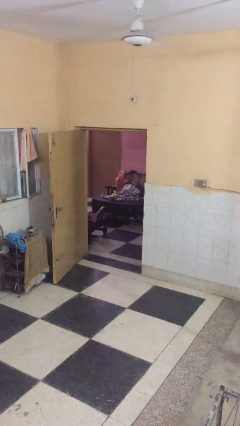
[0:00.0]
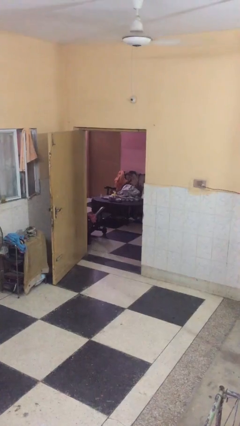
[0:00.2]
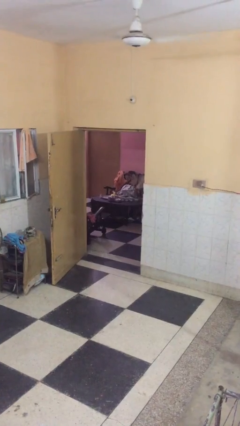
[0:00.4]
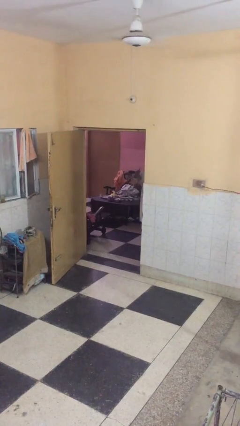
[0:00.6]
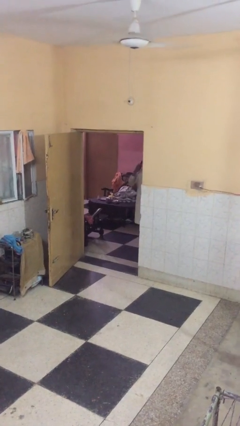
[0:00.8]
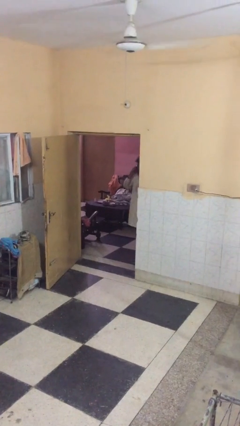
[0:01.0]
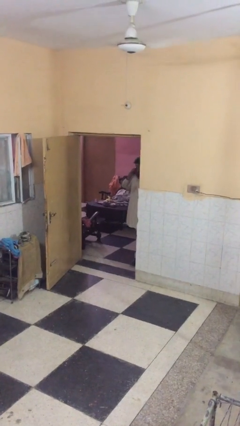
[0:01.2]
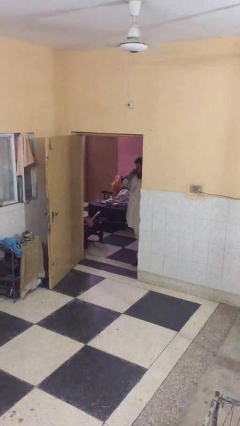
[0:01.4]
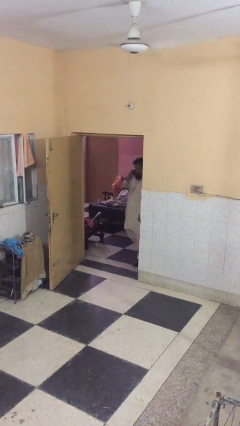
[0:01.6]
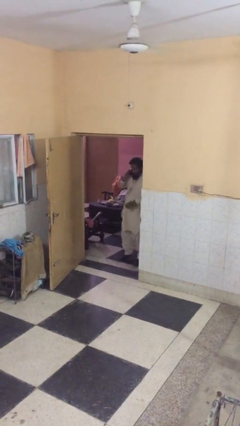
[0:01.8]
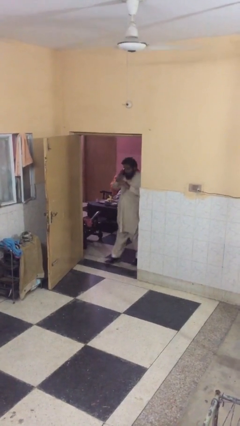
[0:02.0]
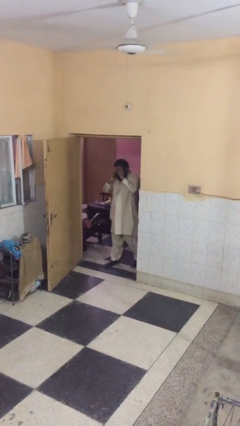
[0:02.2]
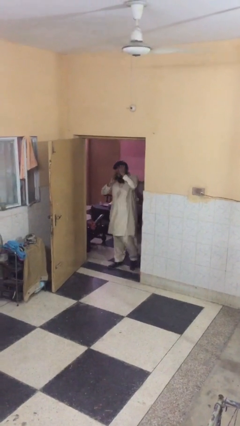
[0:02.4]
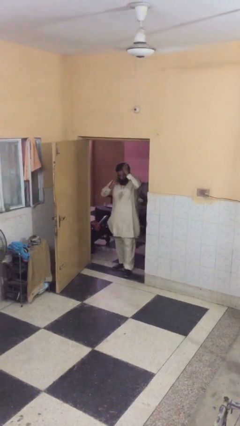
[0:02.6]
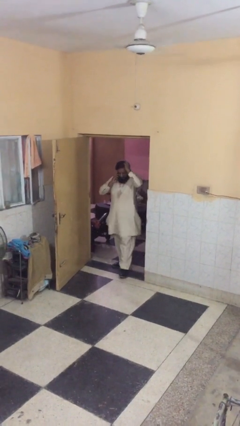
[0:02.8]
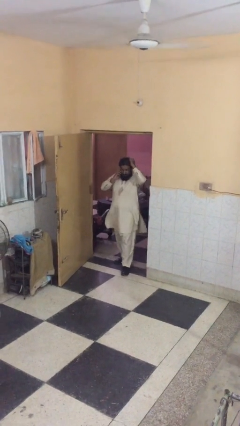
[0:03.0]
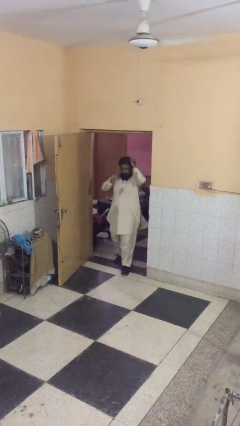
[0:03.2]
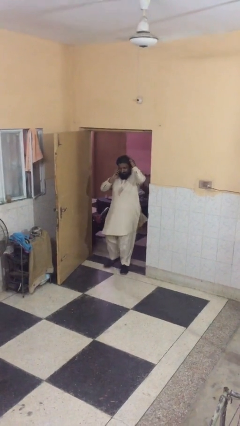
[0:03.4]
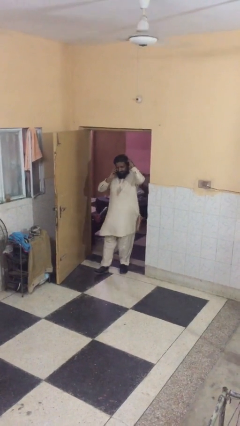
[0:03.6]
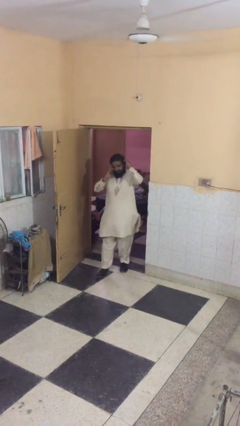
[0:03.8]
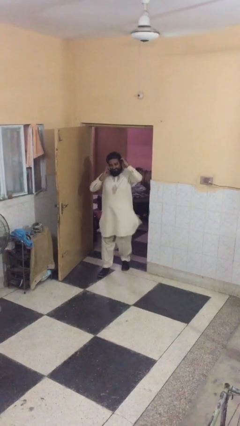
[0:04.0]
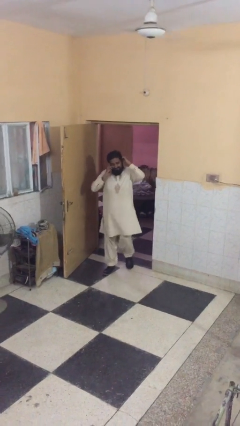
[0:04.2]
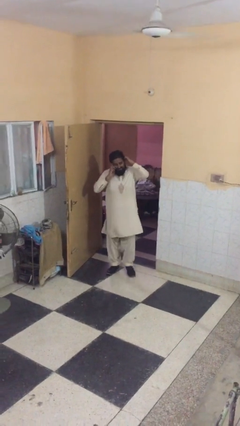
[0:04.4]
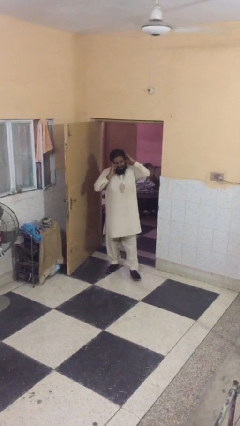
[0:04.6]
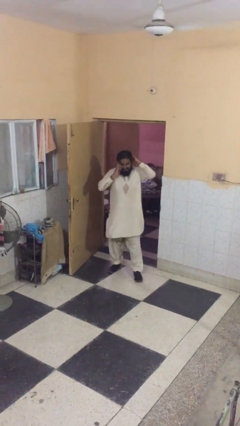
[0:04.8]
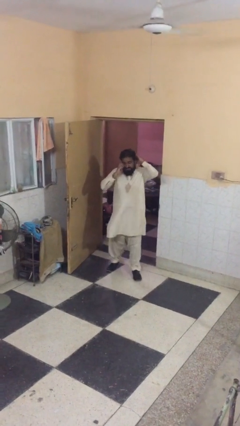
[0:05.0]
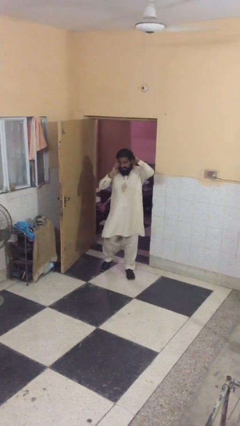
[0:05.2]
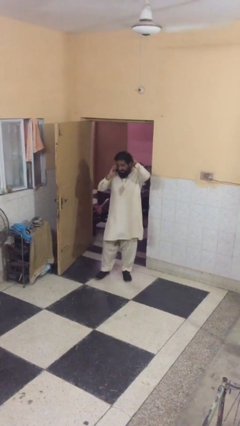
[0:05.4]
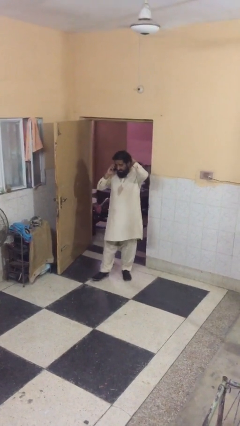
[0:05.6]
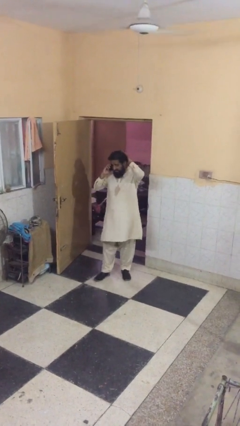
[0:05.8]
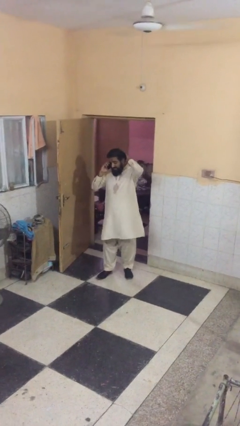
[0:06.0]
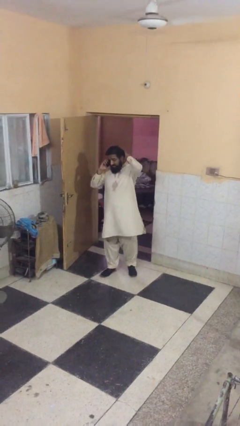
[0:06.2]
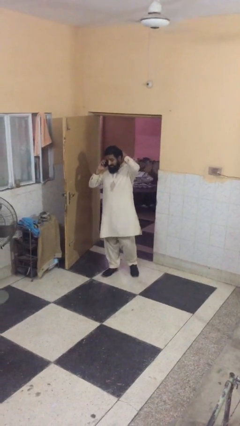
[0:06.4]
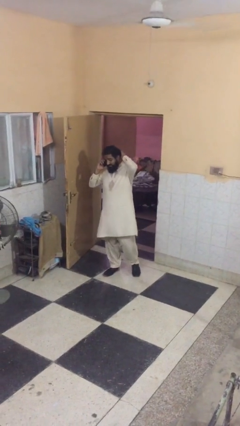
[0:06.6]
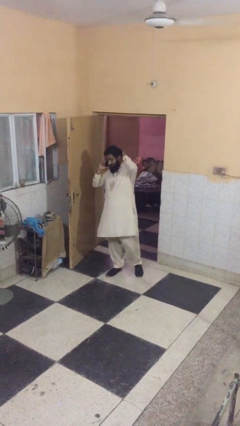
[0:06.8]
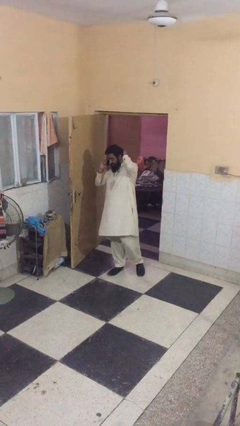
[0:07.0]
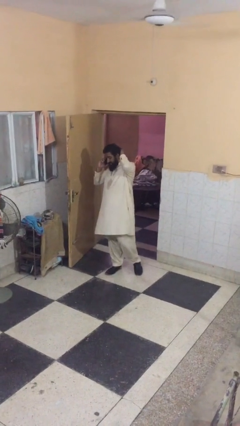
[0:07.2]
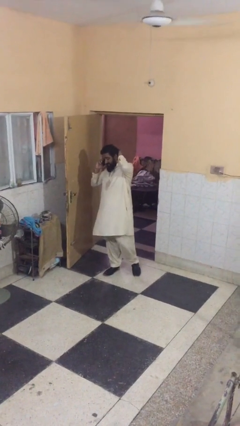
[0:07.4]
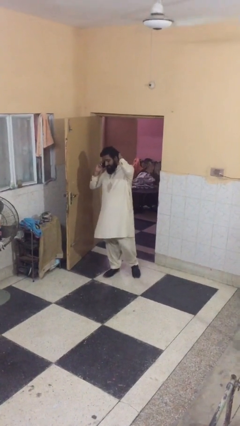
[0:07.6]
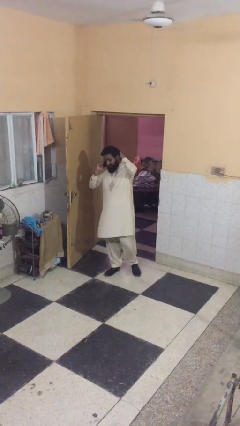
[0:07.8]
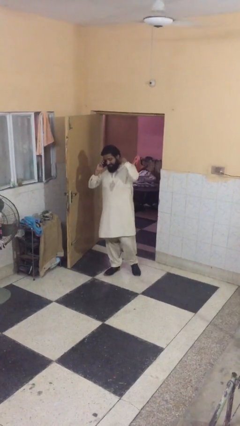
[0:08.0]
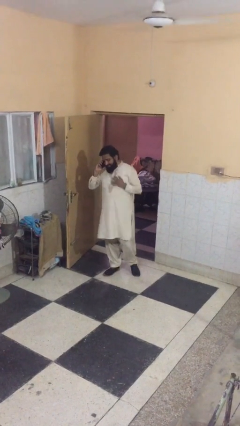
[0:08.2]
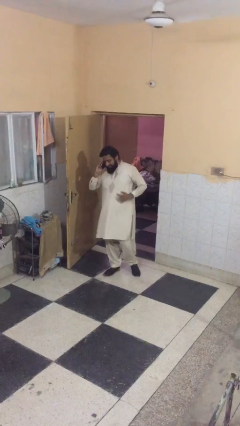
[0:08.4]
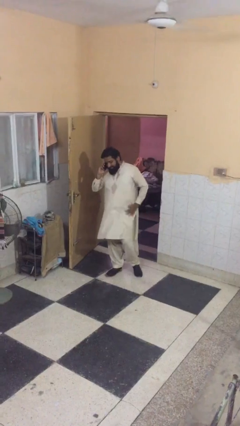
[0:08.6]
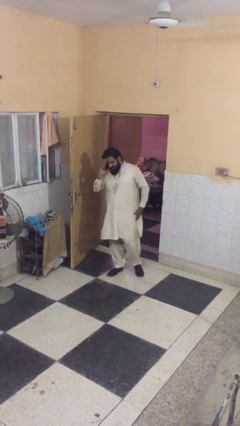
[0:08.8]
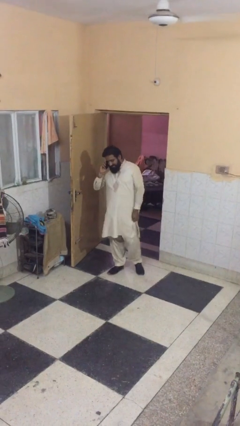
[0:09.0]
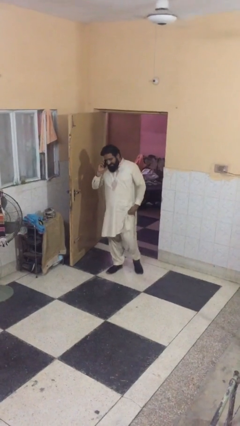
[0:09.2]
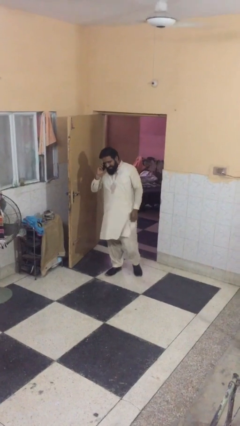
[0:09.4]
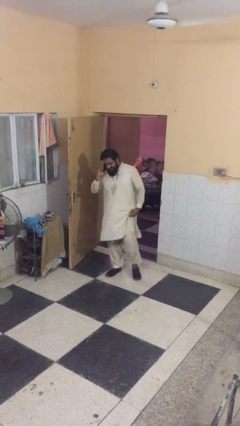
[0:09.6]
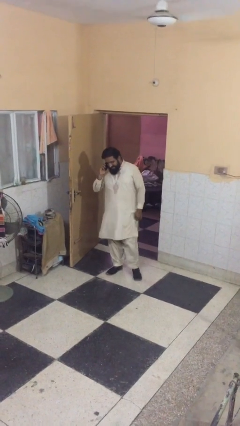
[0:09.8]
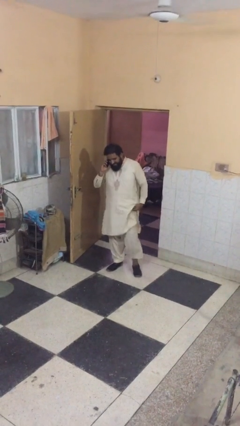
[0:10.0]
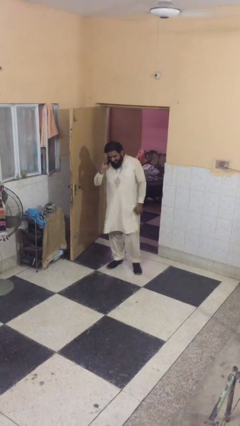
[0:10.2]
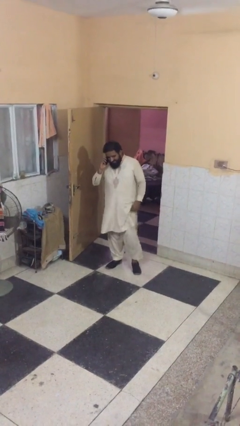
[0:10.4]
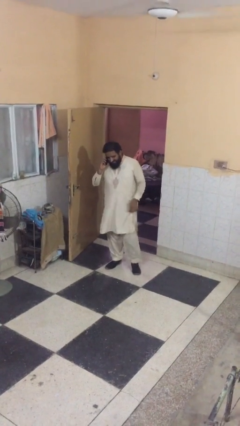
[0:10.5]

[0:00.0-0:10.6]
person enters scene through structure

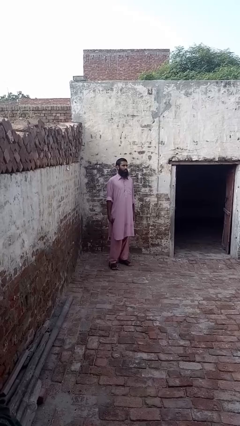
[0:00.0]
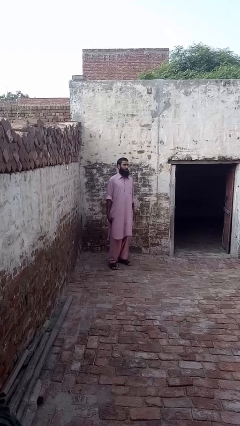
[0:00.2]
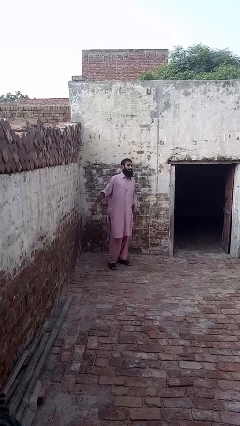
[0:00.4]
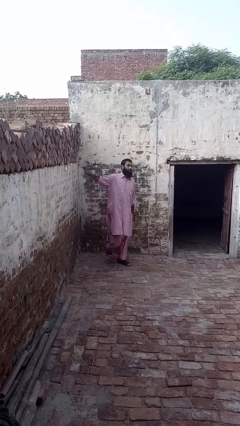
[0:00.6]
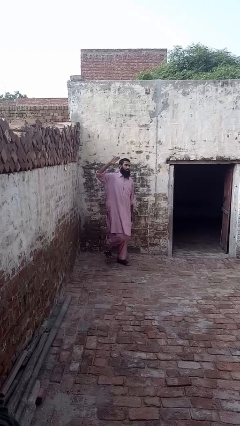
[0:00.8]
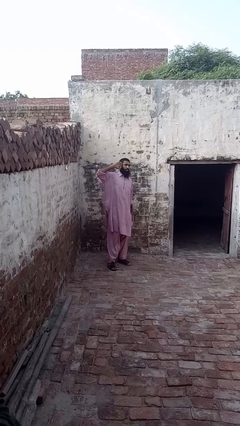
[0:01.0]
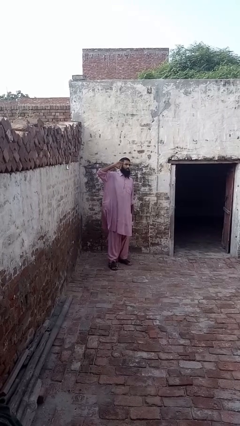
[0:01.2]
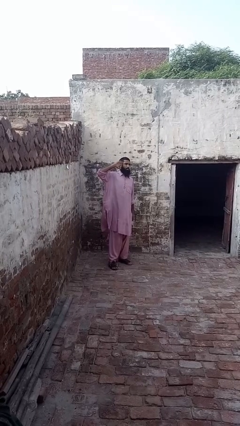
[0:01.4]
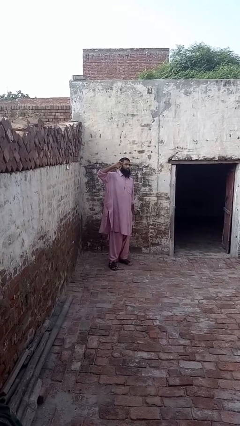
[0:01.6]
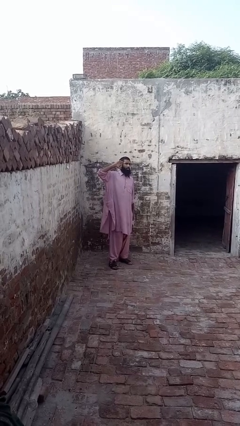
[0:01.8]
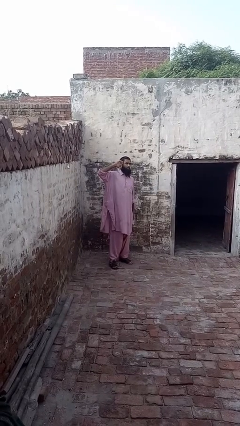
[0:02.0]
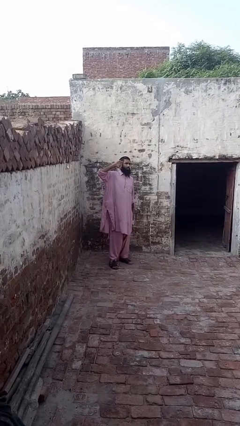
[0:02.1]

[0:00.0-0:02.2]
person salutes

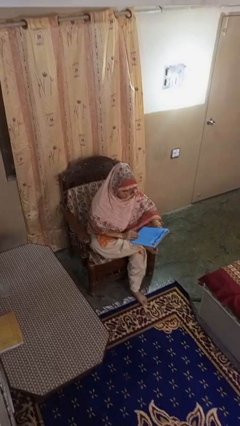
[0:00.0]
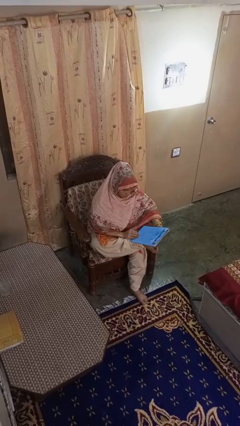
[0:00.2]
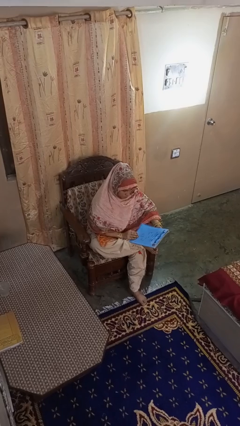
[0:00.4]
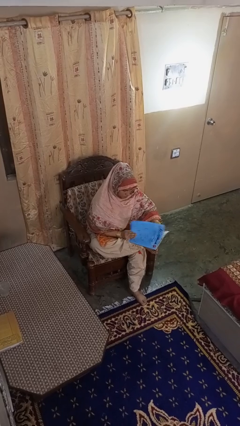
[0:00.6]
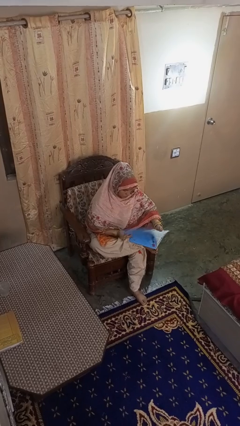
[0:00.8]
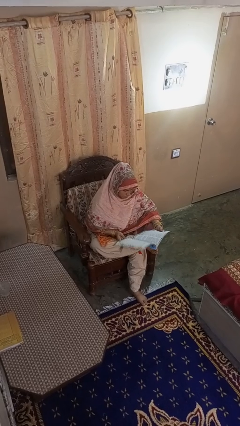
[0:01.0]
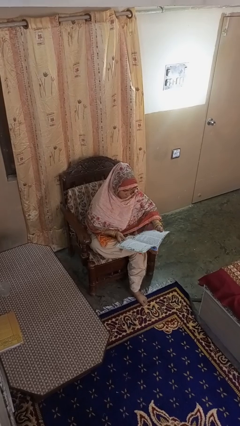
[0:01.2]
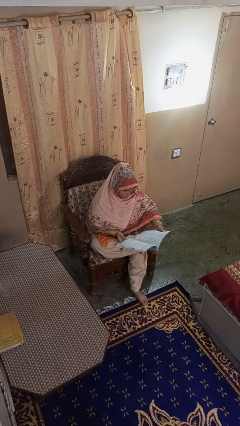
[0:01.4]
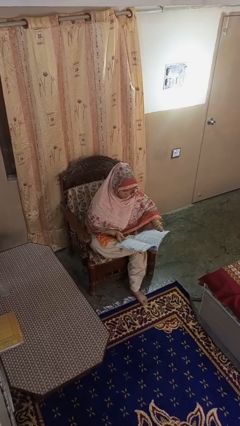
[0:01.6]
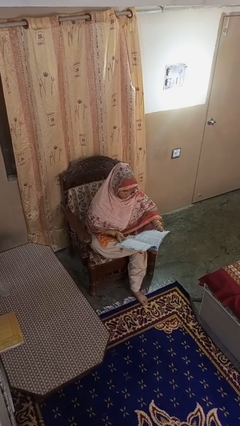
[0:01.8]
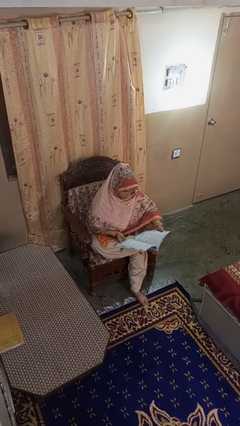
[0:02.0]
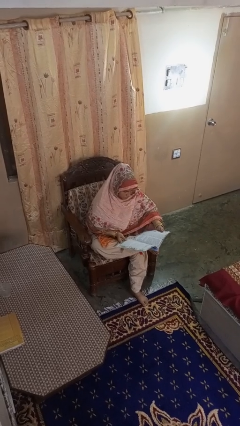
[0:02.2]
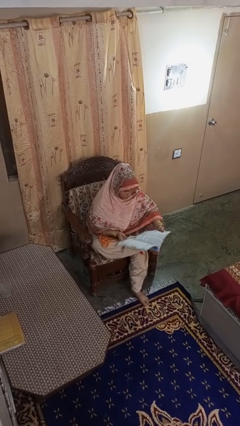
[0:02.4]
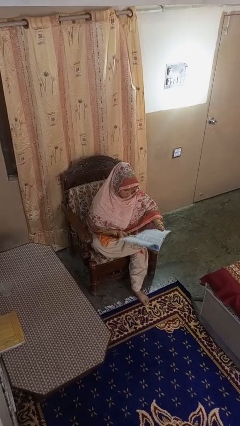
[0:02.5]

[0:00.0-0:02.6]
person reads magazine

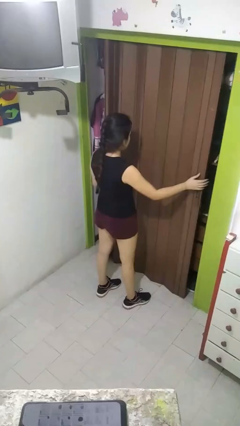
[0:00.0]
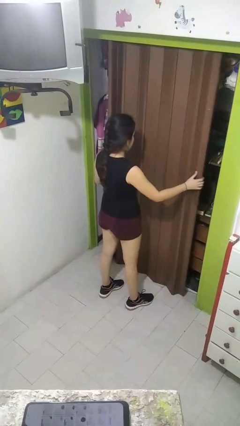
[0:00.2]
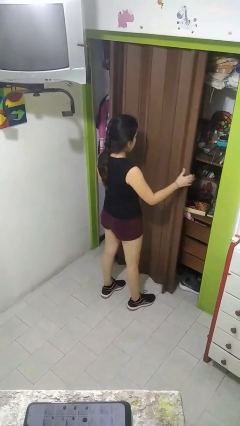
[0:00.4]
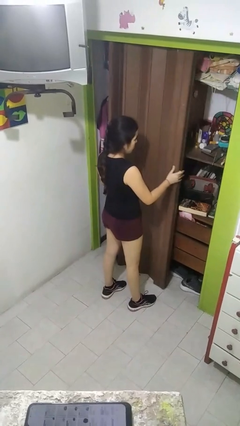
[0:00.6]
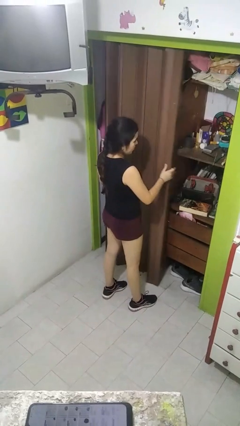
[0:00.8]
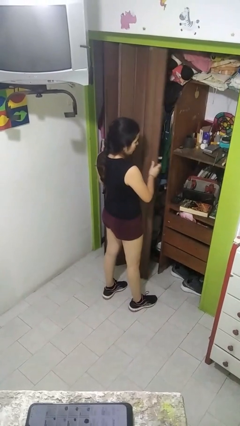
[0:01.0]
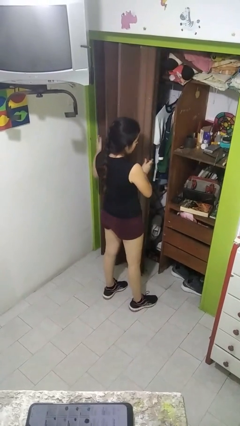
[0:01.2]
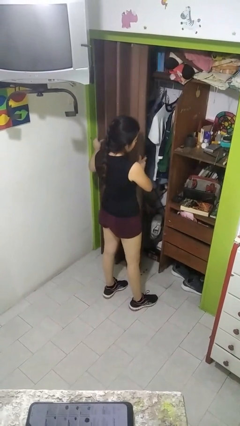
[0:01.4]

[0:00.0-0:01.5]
person opens closet door

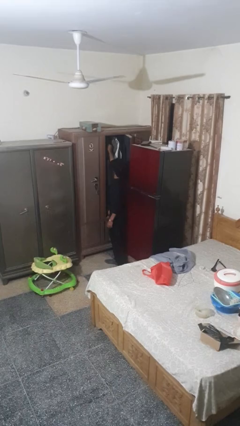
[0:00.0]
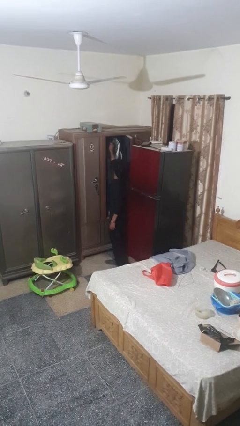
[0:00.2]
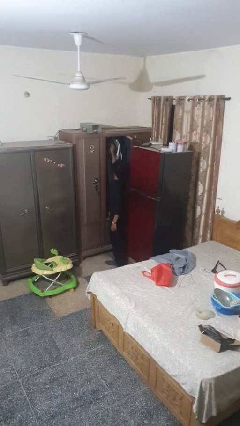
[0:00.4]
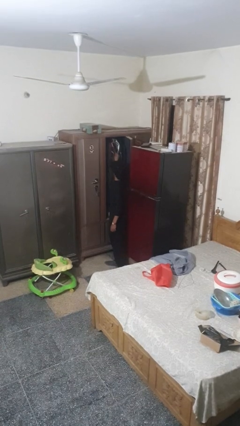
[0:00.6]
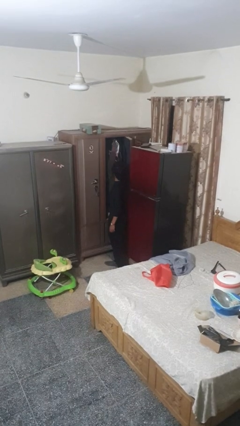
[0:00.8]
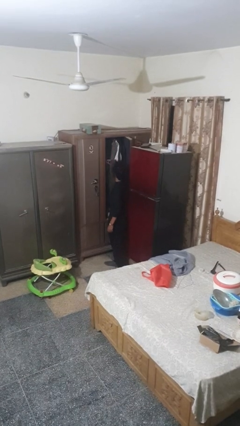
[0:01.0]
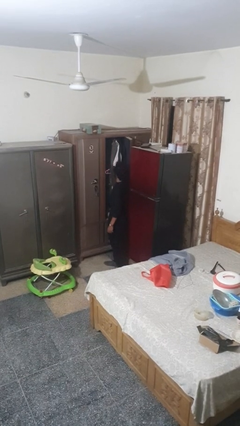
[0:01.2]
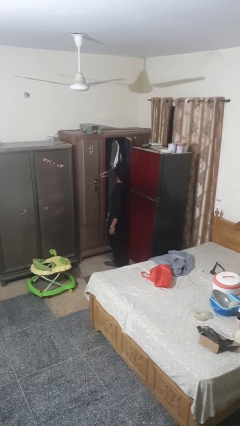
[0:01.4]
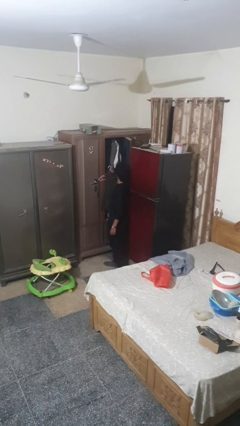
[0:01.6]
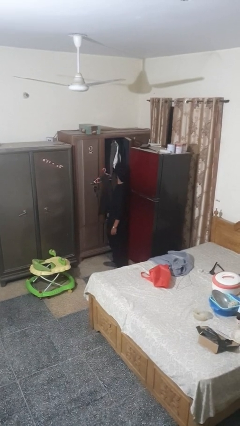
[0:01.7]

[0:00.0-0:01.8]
person takes clothes from closet
